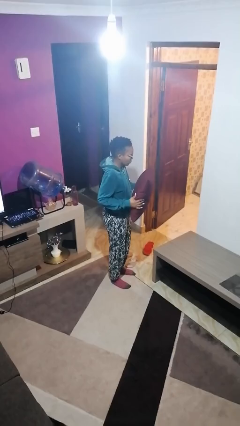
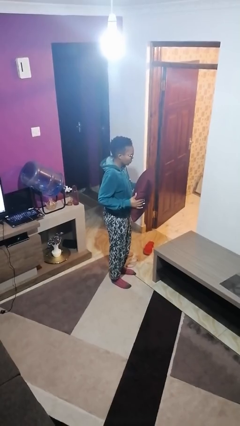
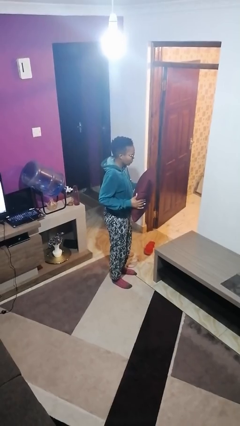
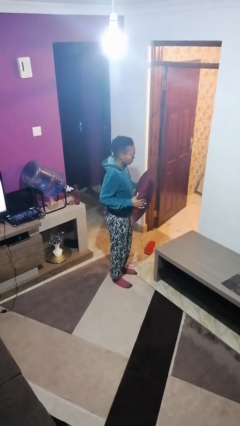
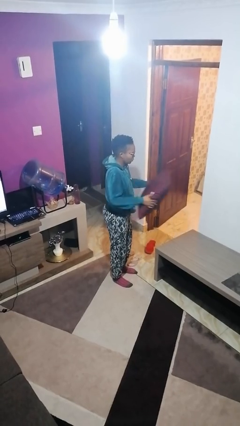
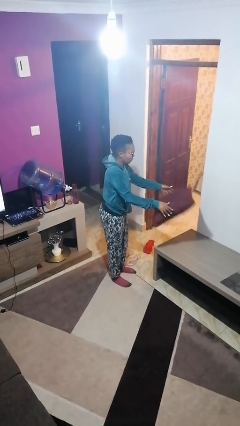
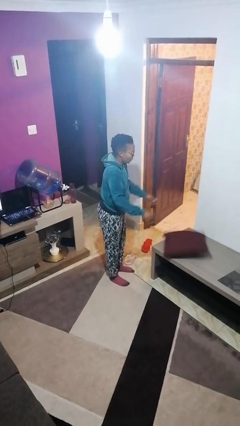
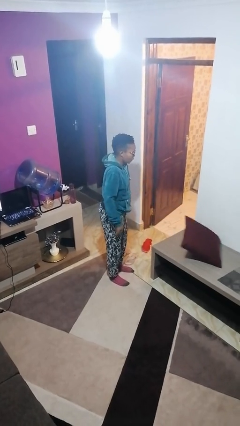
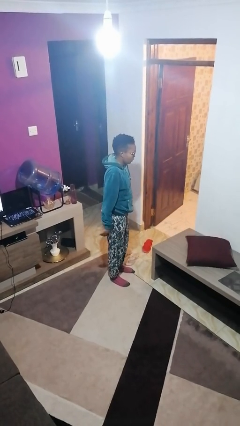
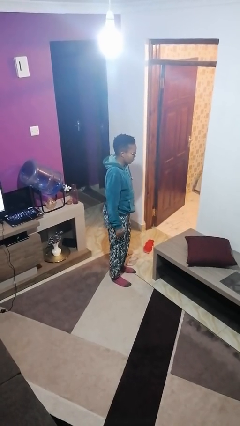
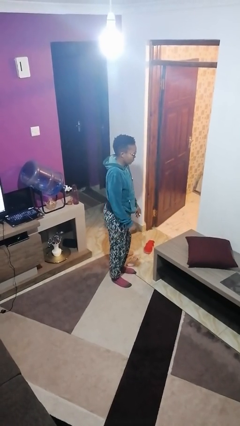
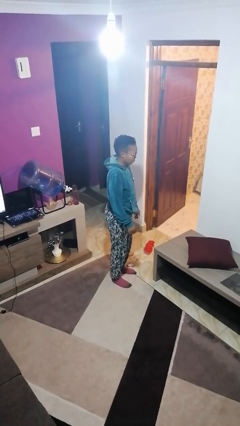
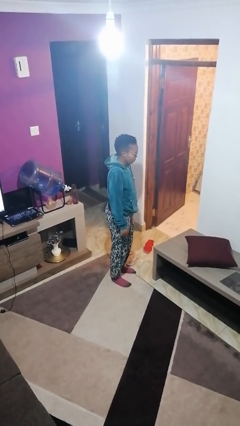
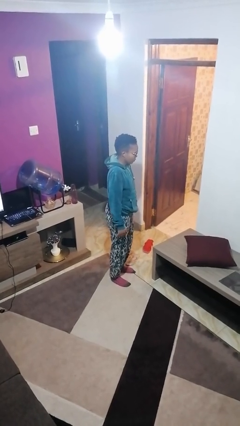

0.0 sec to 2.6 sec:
person throws object on table

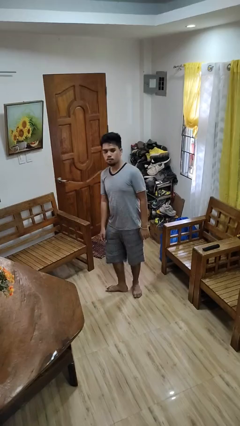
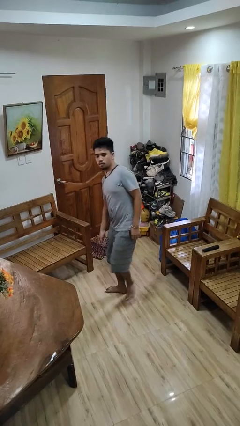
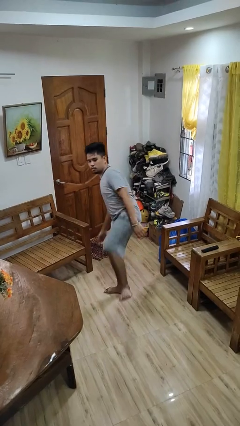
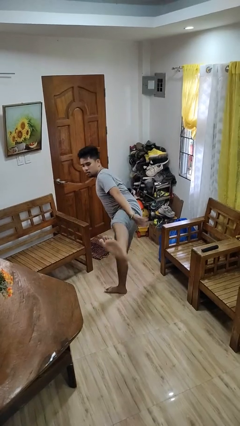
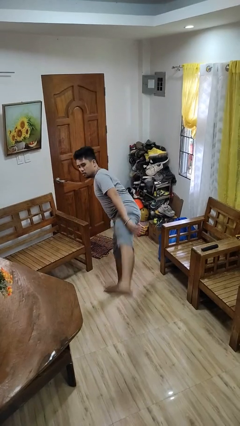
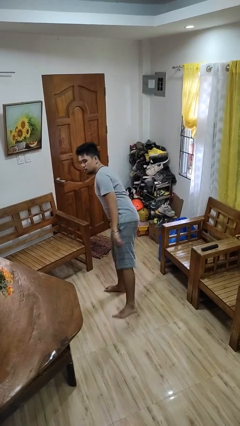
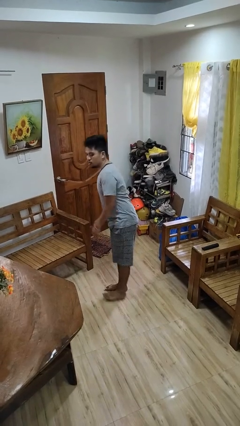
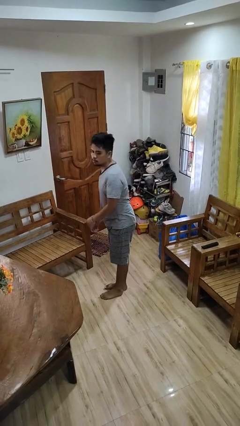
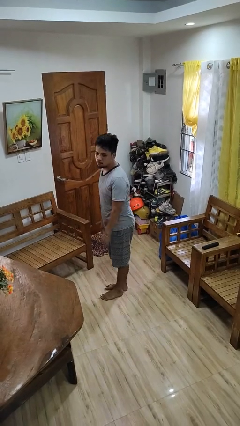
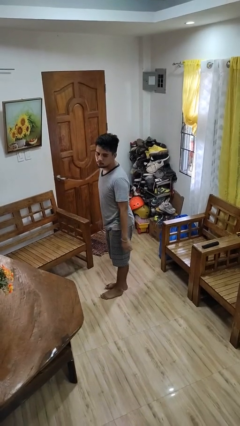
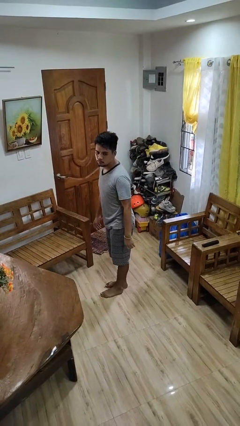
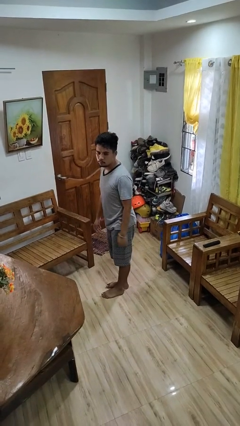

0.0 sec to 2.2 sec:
person karate kicks

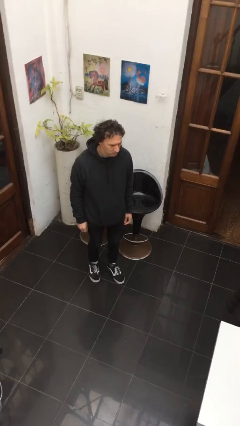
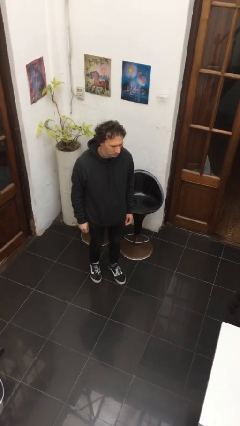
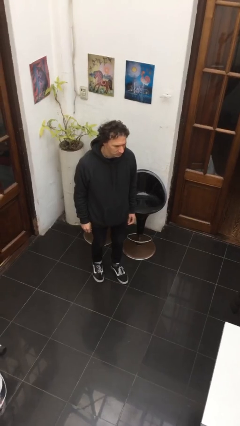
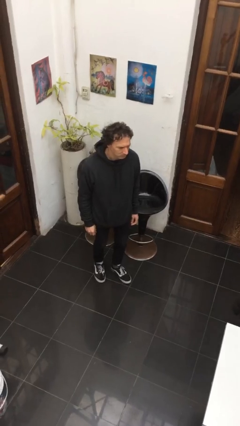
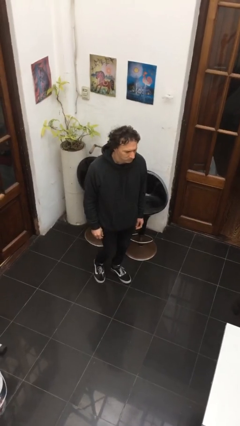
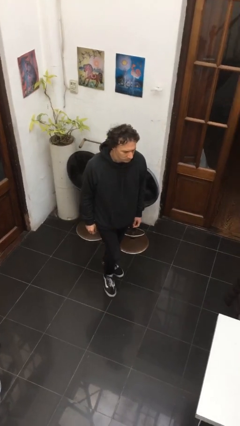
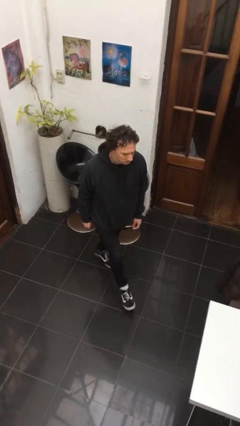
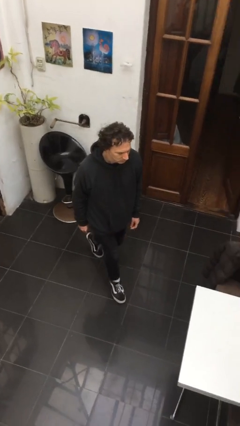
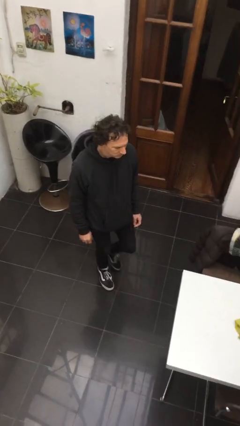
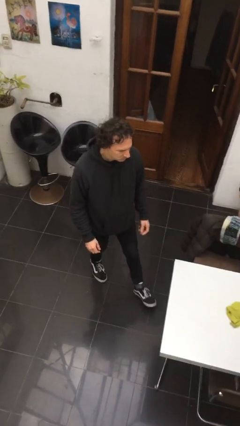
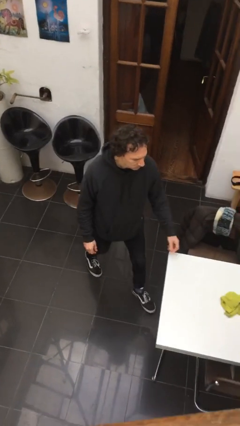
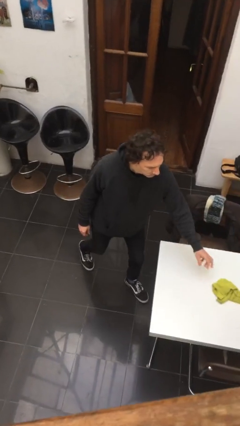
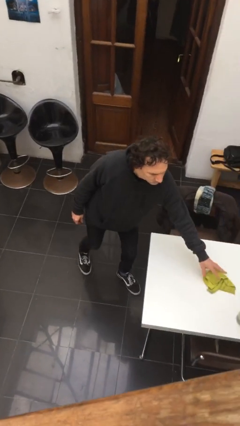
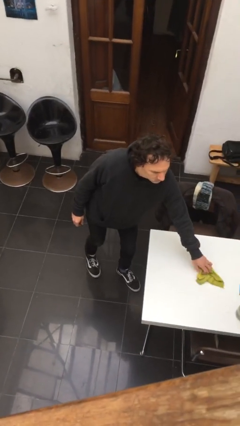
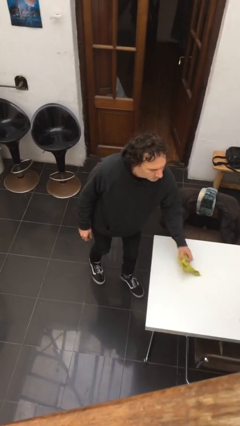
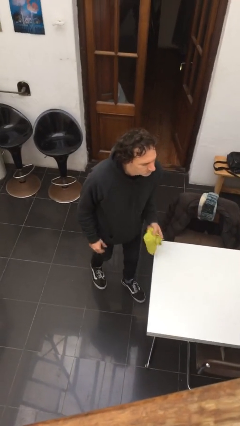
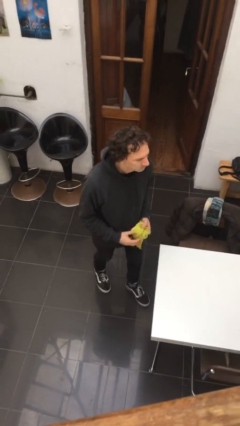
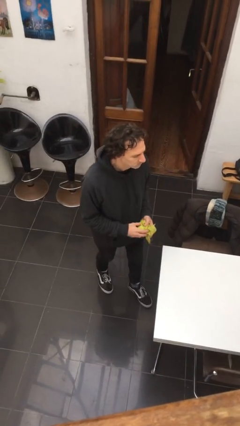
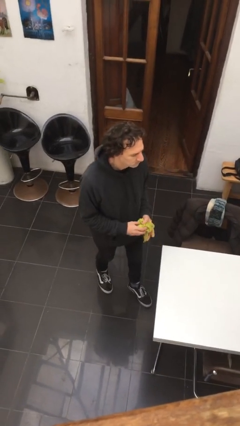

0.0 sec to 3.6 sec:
person picks up object from table

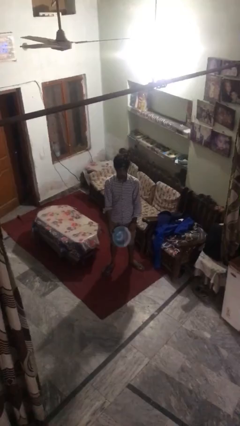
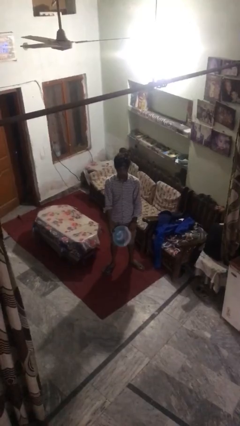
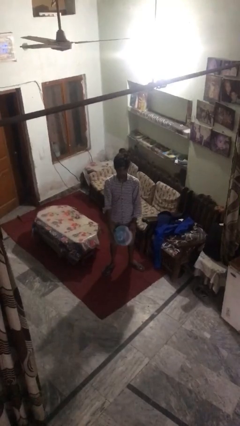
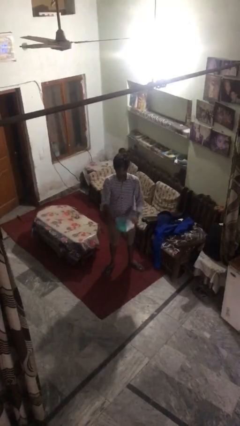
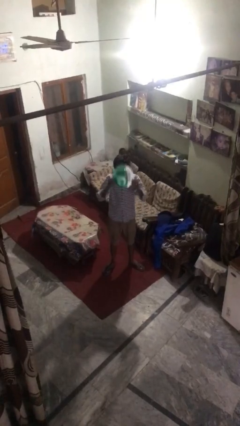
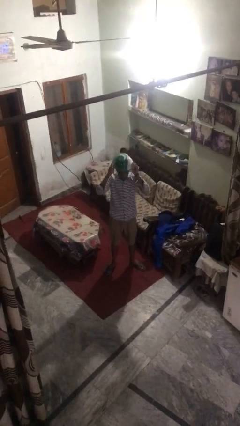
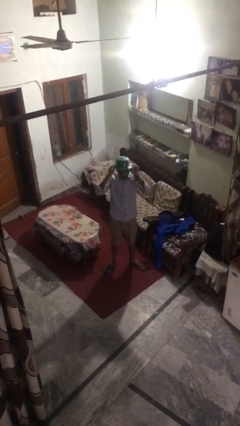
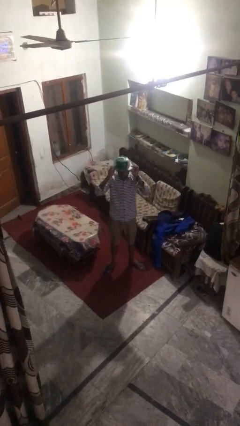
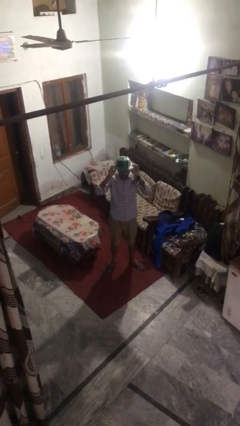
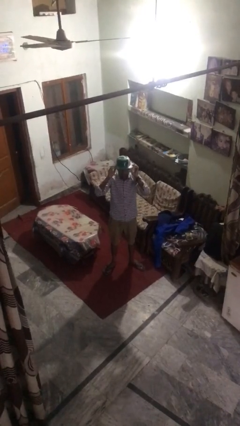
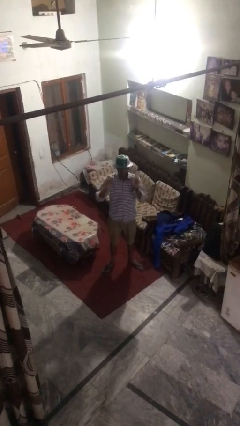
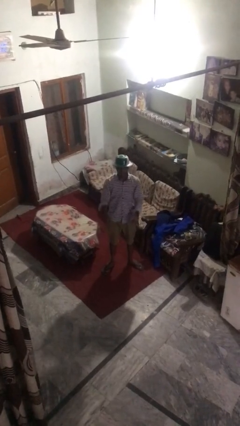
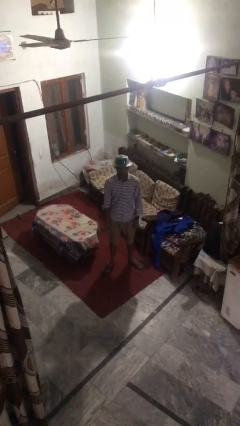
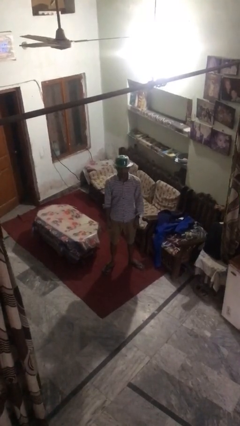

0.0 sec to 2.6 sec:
person puts on hat

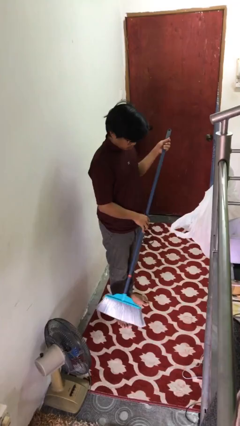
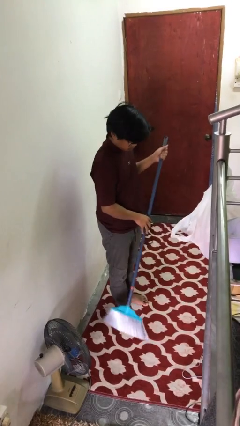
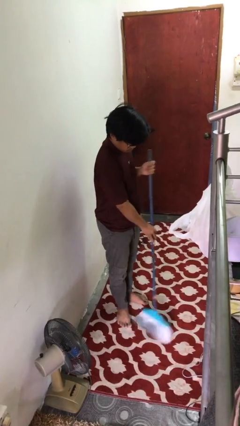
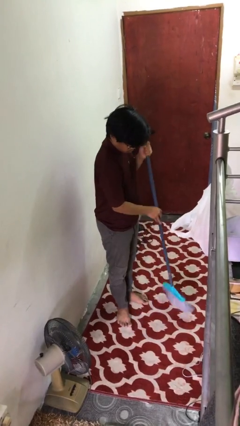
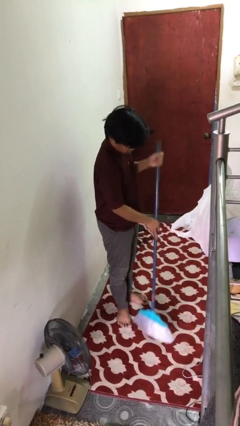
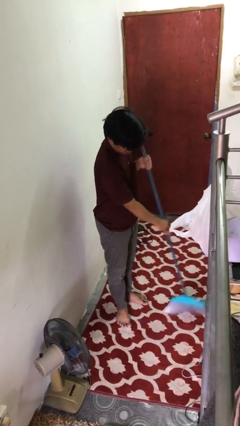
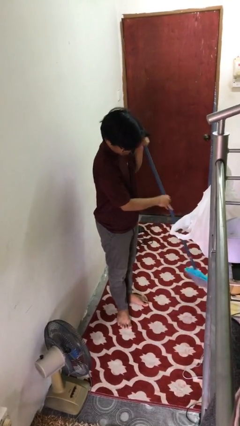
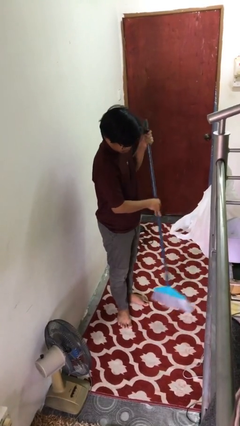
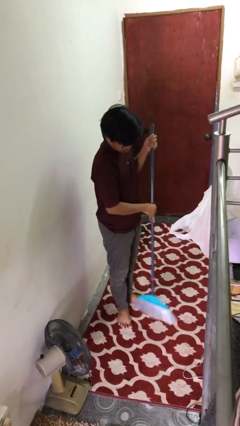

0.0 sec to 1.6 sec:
person sweeps floor

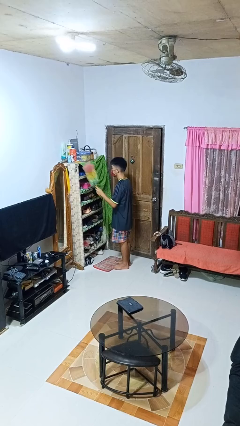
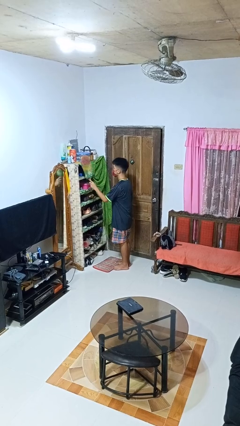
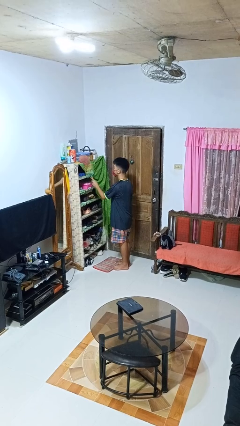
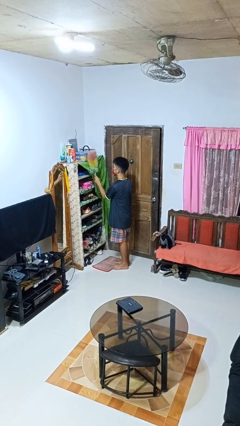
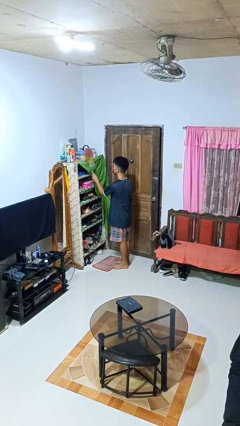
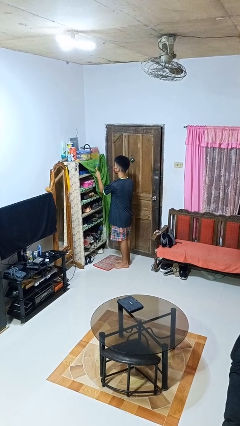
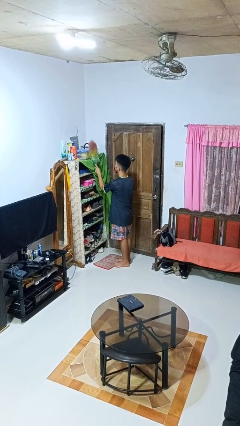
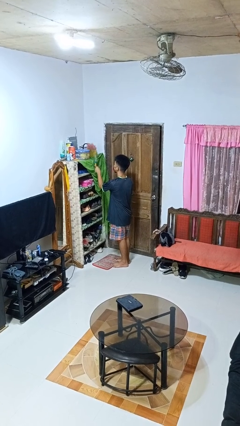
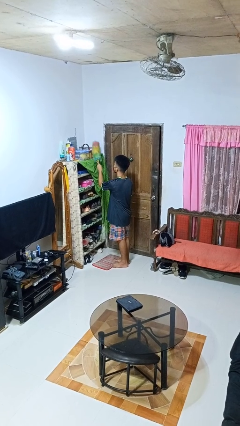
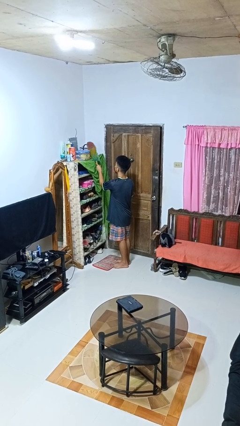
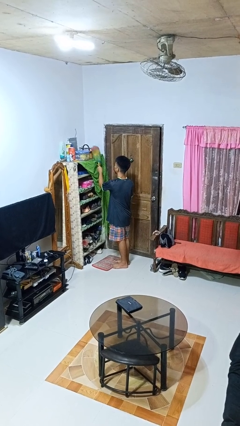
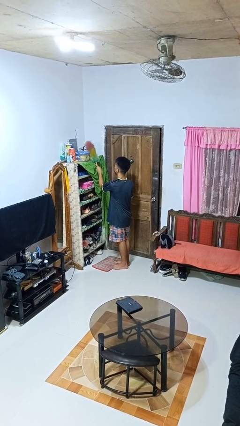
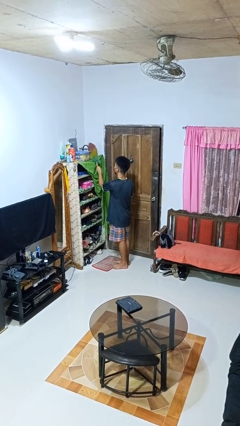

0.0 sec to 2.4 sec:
person dusts furniture

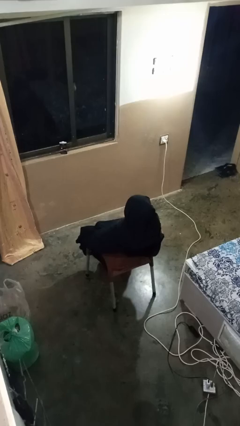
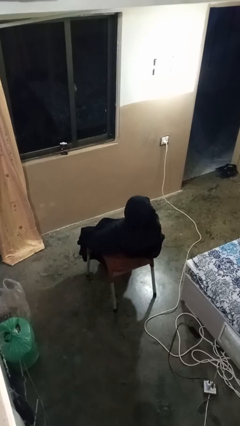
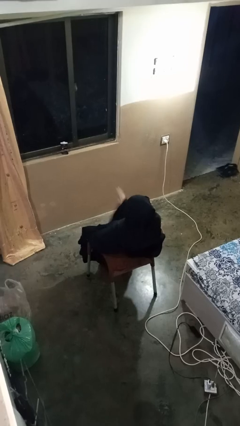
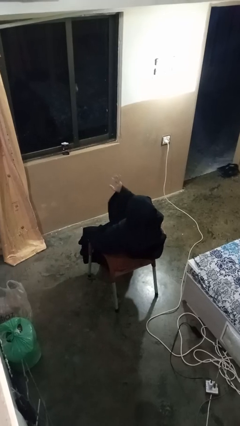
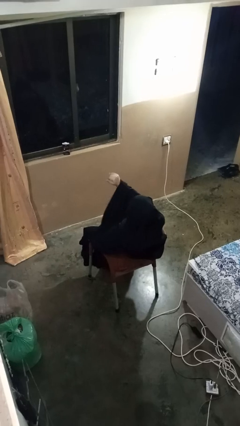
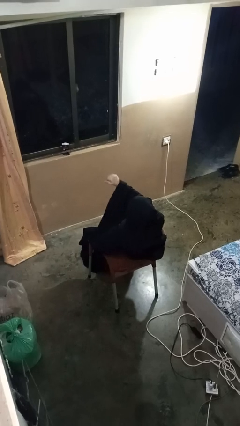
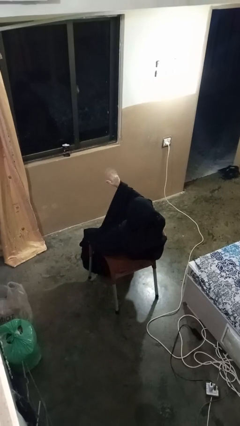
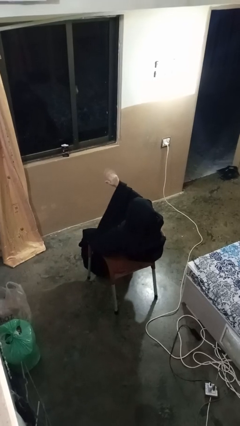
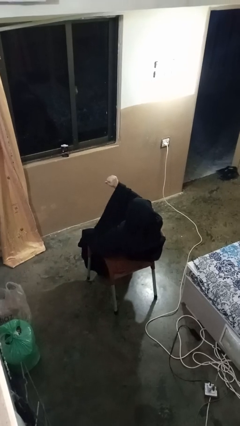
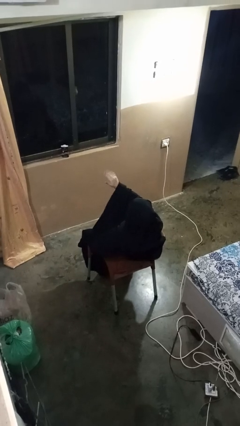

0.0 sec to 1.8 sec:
person gestures come here

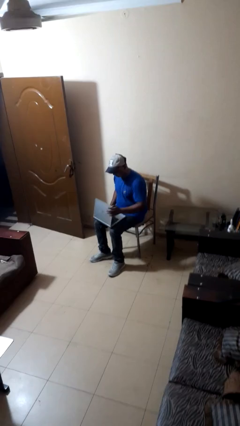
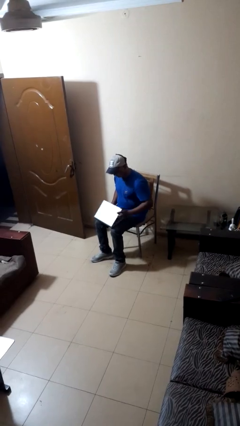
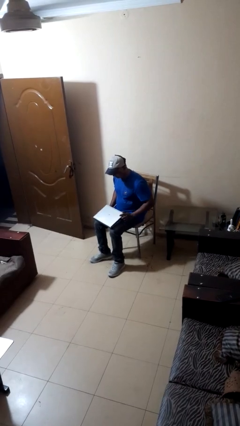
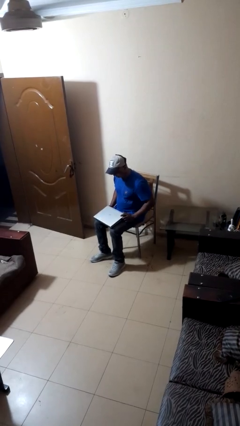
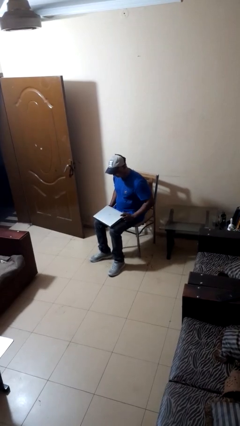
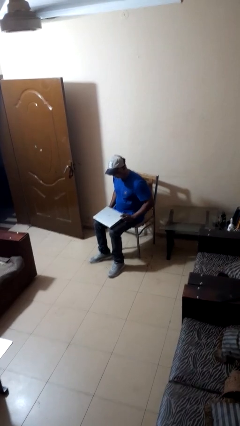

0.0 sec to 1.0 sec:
person closes laptop
